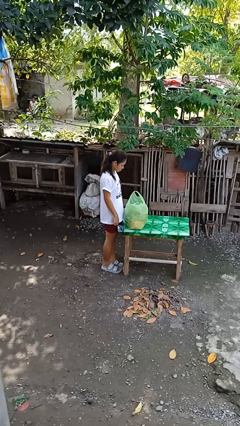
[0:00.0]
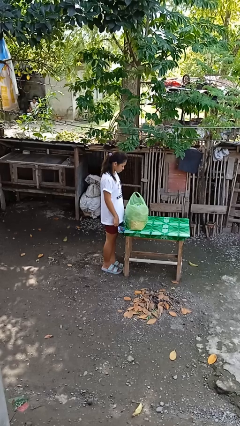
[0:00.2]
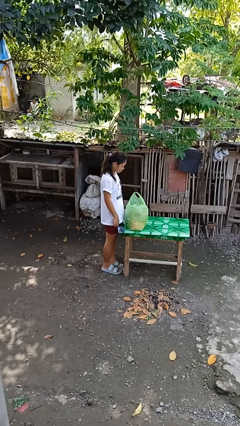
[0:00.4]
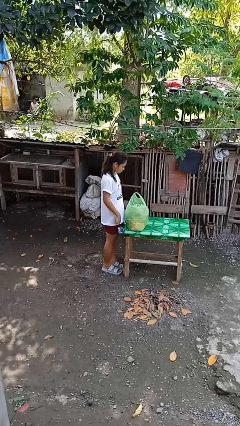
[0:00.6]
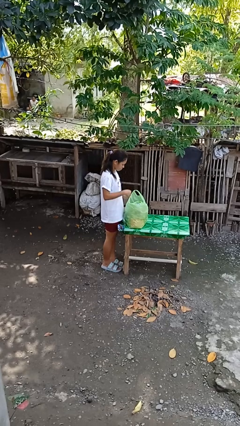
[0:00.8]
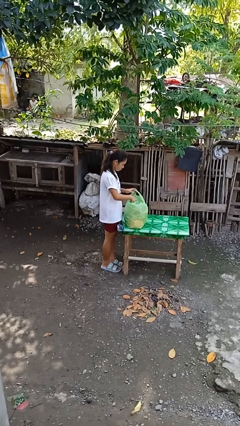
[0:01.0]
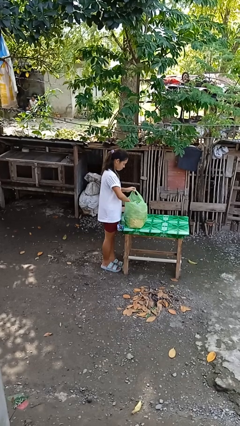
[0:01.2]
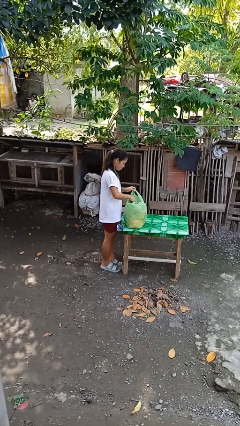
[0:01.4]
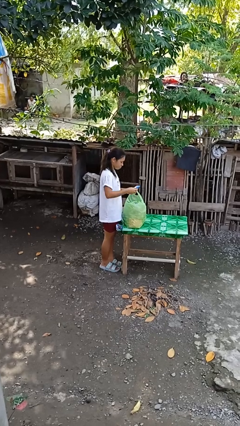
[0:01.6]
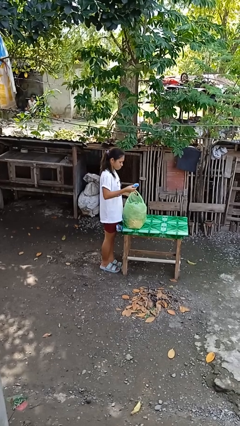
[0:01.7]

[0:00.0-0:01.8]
person hits person with pillow

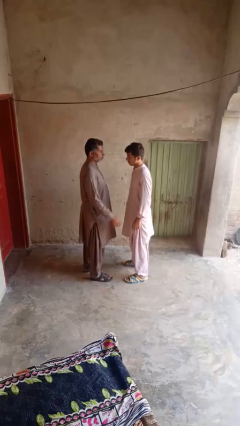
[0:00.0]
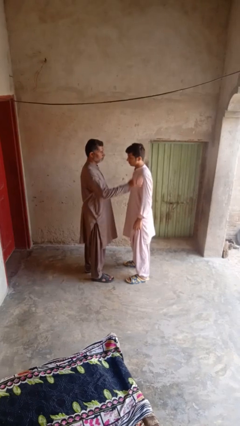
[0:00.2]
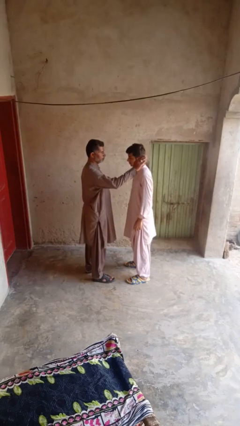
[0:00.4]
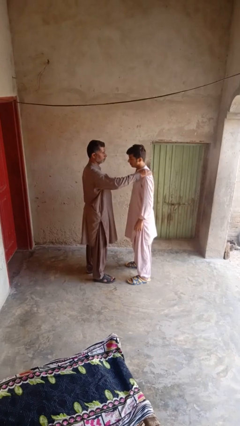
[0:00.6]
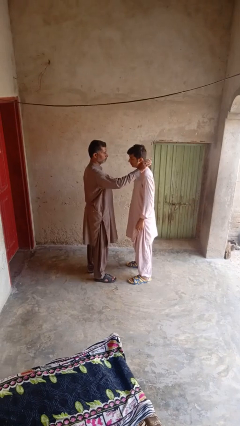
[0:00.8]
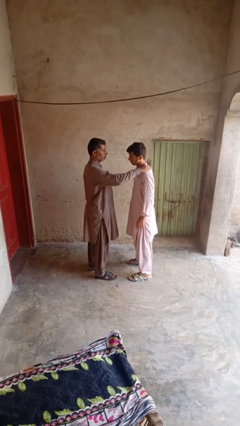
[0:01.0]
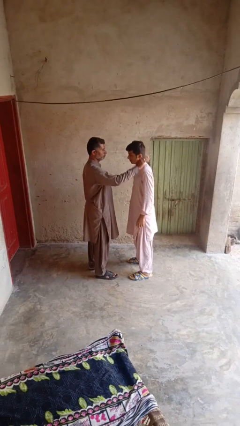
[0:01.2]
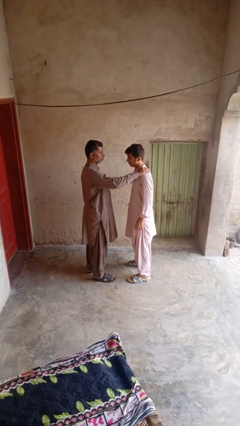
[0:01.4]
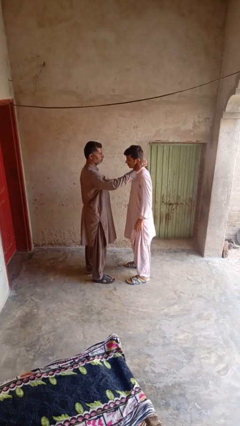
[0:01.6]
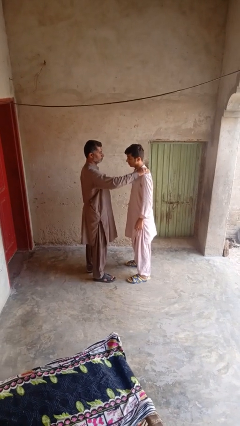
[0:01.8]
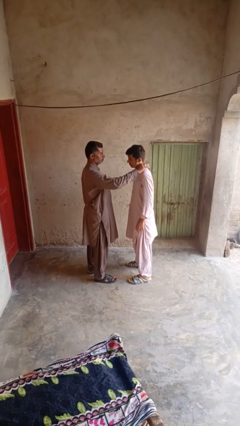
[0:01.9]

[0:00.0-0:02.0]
person pounds shoulders of person

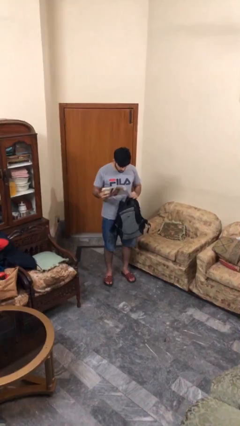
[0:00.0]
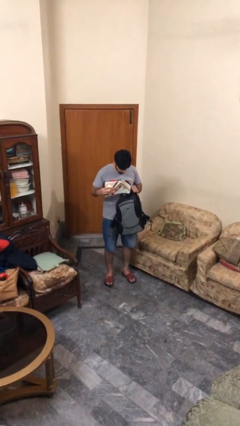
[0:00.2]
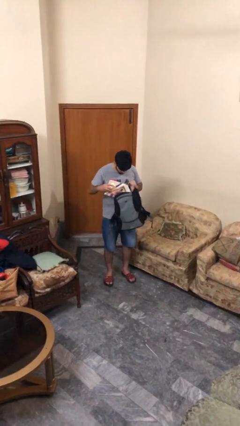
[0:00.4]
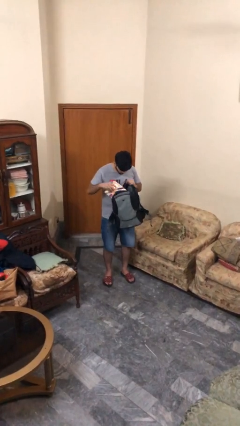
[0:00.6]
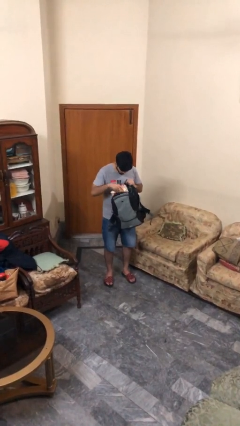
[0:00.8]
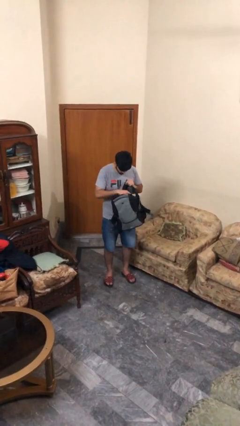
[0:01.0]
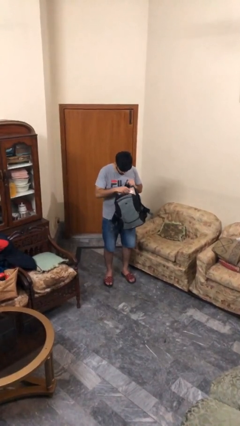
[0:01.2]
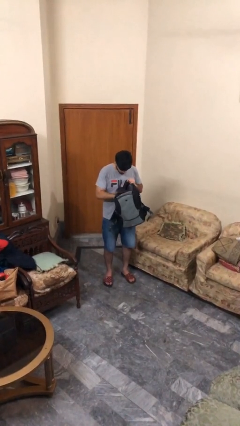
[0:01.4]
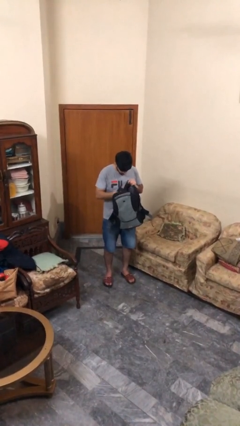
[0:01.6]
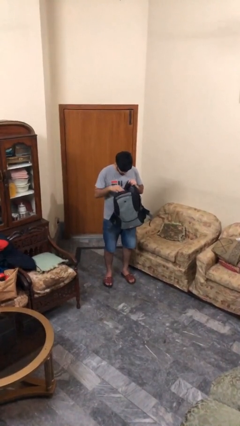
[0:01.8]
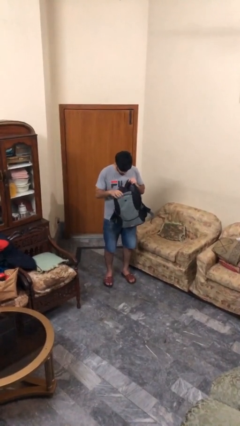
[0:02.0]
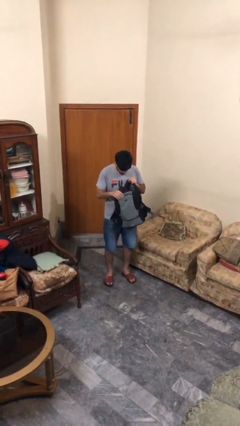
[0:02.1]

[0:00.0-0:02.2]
person puts object into backpack

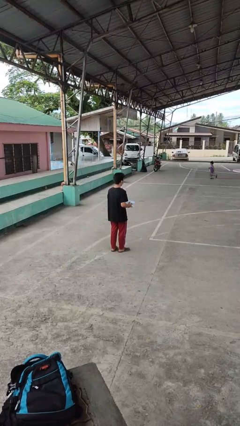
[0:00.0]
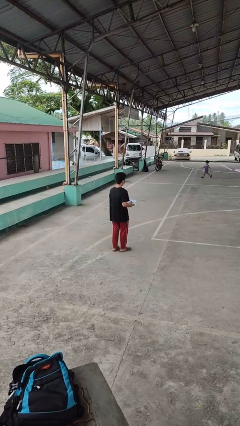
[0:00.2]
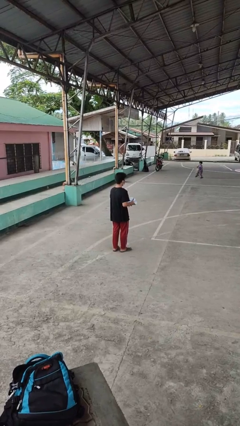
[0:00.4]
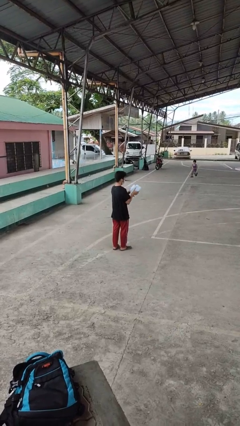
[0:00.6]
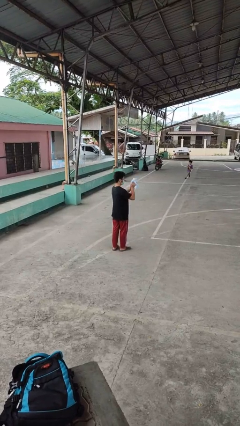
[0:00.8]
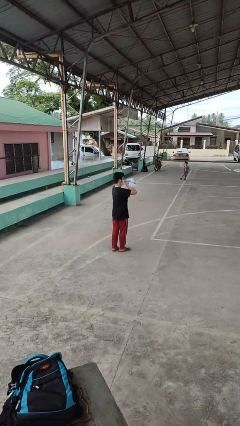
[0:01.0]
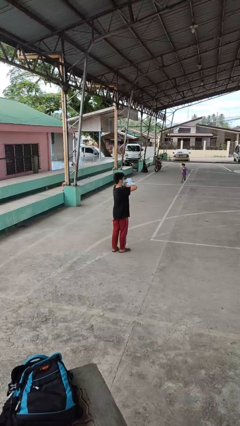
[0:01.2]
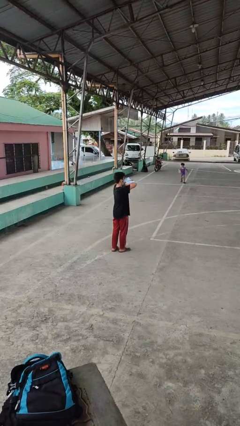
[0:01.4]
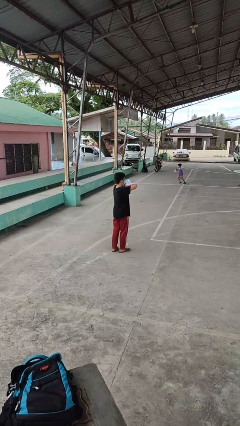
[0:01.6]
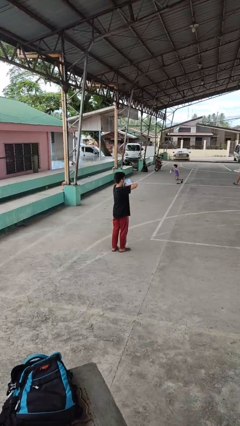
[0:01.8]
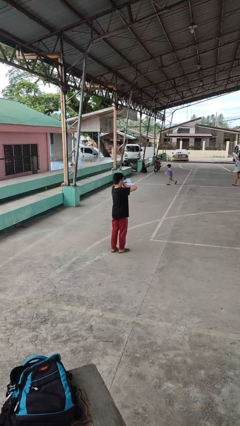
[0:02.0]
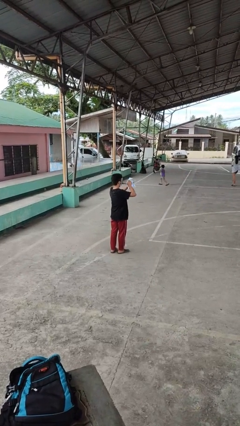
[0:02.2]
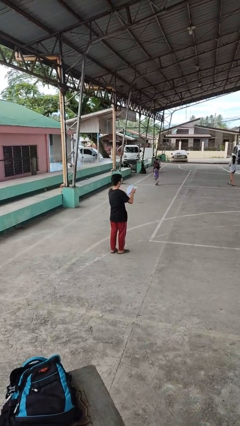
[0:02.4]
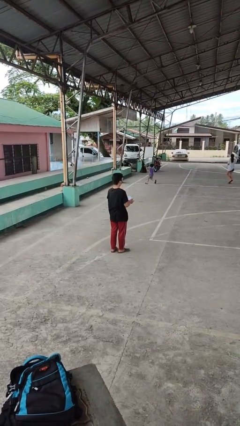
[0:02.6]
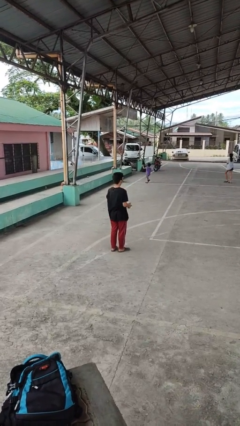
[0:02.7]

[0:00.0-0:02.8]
person squeezes object

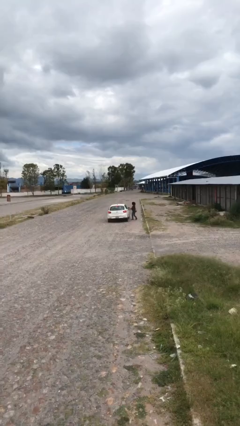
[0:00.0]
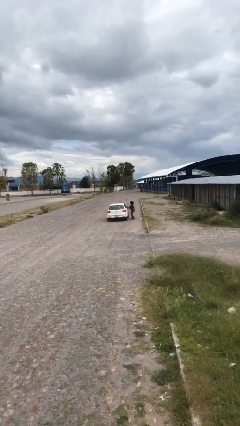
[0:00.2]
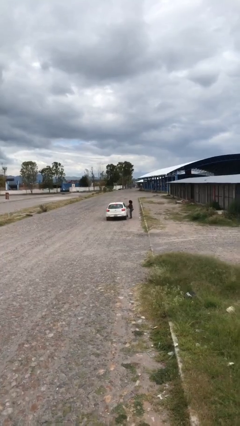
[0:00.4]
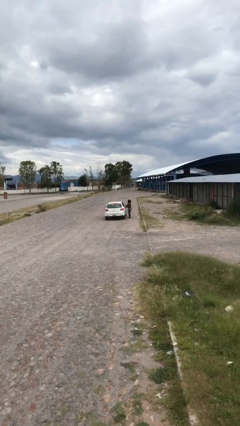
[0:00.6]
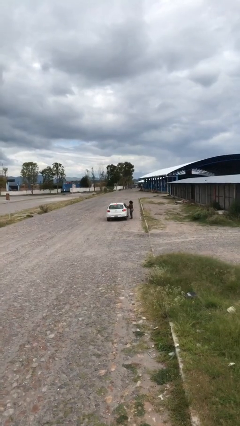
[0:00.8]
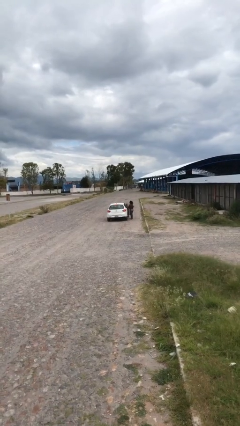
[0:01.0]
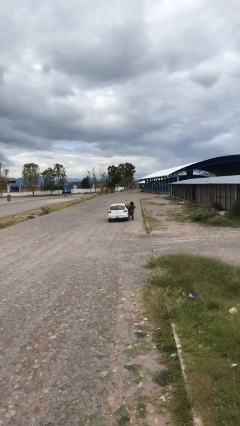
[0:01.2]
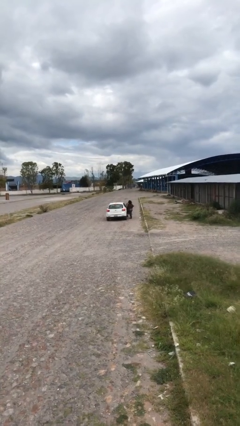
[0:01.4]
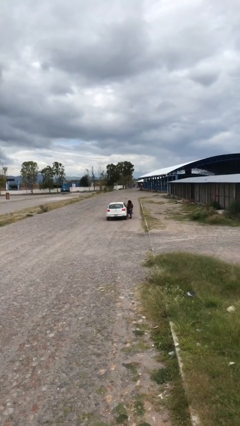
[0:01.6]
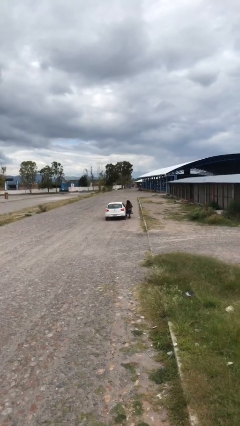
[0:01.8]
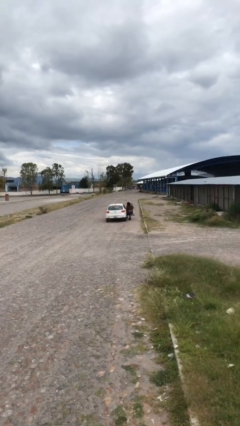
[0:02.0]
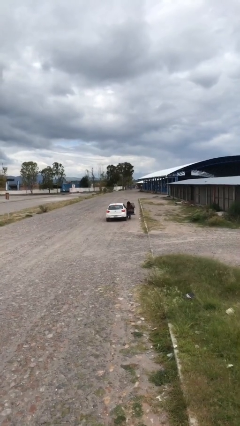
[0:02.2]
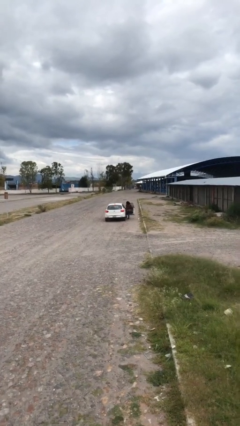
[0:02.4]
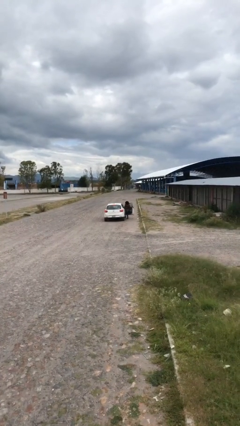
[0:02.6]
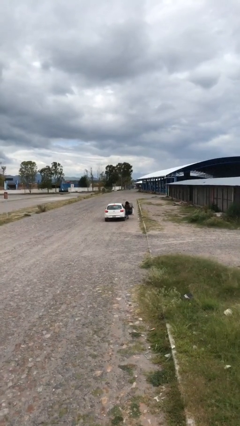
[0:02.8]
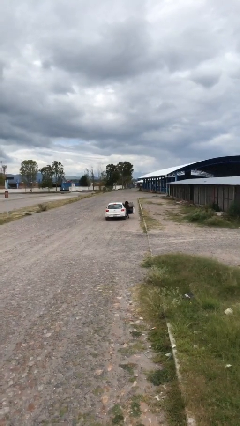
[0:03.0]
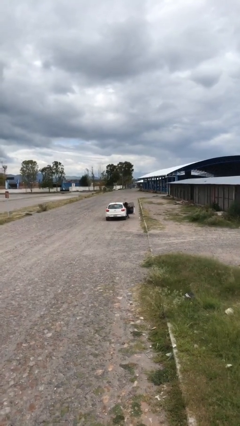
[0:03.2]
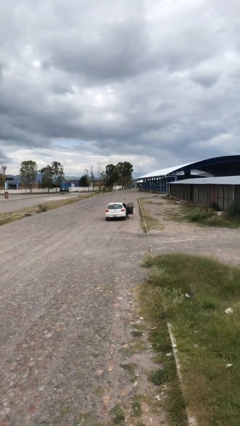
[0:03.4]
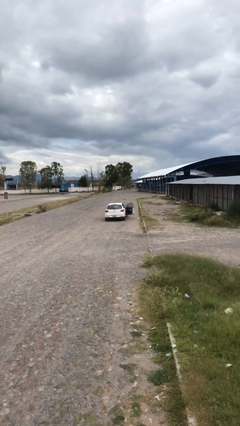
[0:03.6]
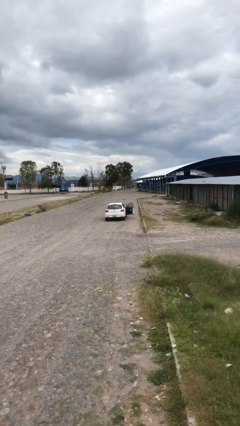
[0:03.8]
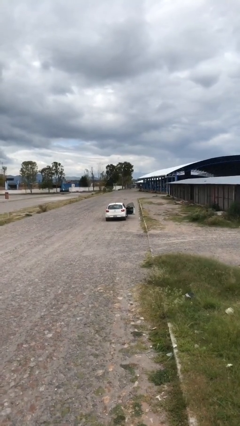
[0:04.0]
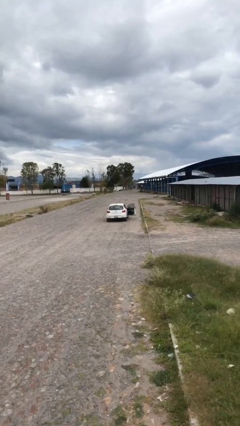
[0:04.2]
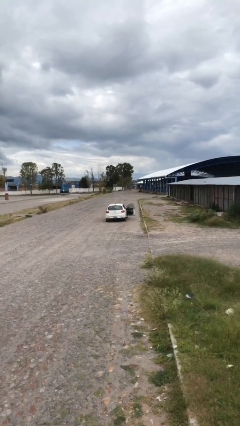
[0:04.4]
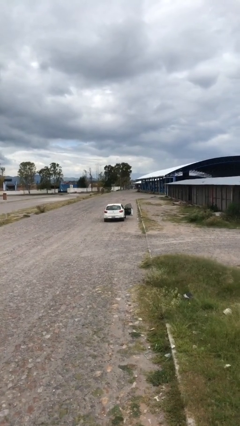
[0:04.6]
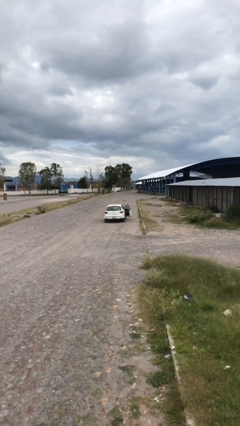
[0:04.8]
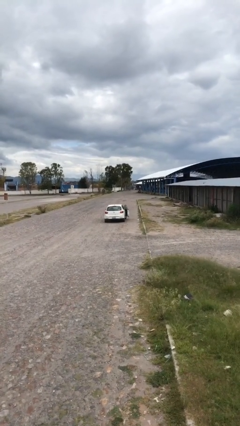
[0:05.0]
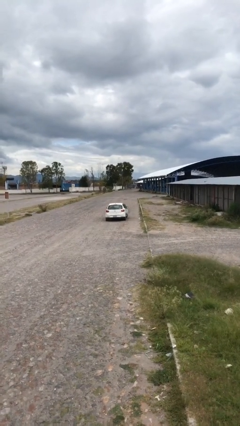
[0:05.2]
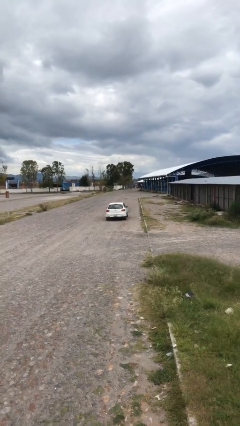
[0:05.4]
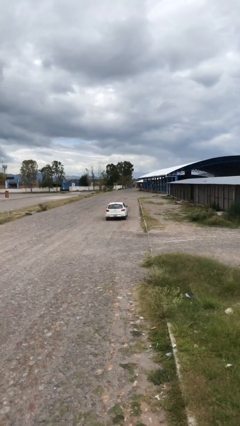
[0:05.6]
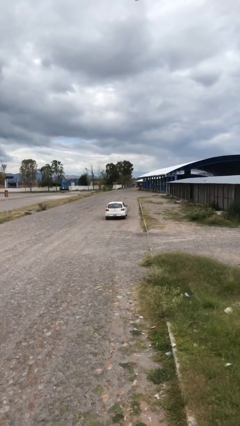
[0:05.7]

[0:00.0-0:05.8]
car picks up person

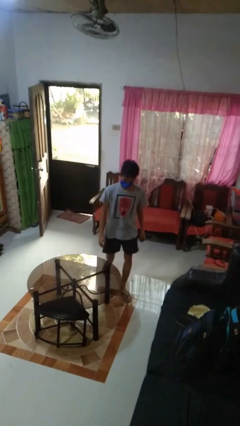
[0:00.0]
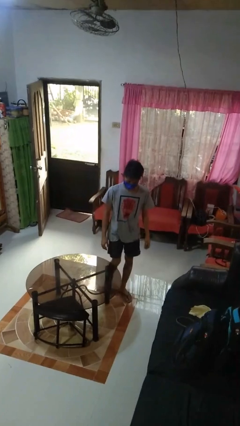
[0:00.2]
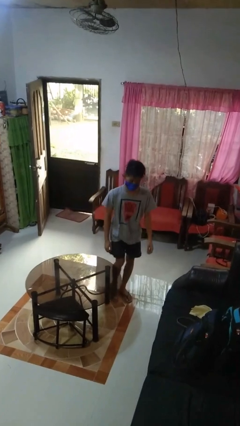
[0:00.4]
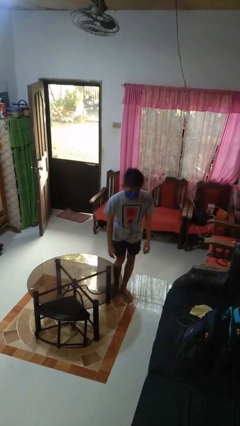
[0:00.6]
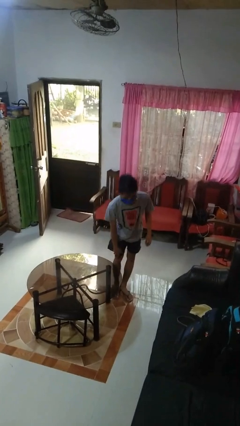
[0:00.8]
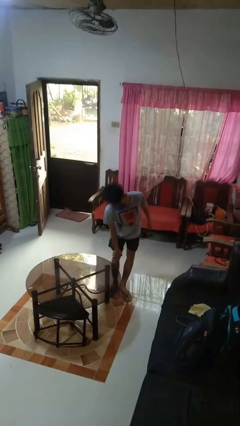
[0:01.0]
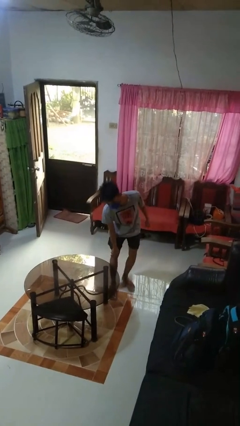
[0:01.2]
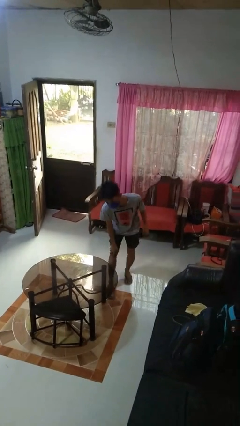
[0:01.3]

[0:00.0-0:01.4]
person bumps into table

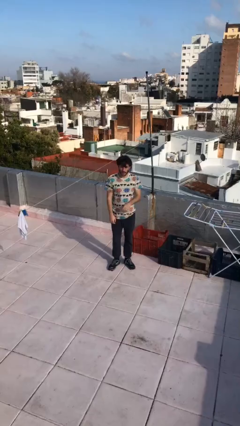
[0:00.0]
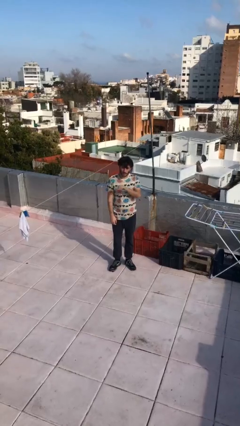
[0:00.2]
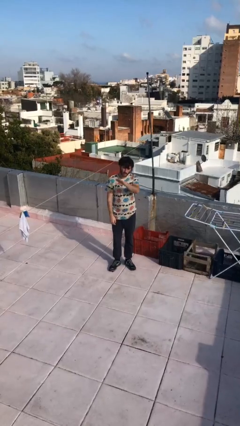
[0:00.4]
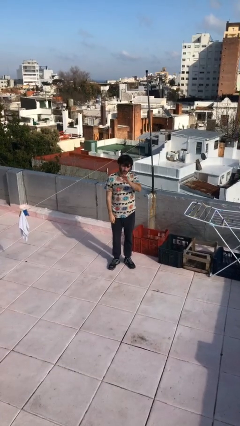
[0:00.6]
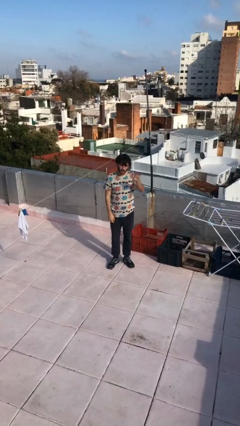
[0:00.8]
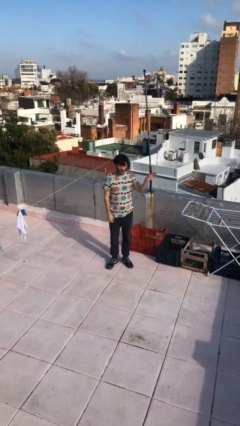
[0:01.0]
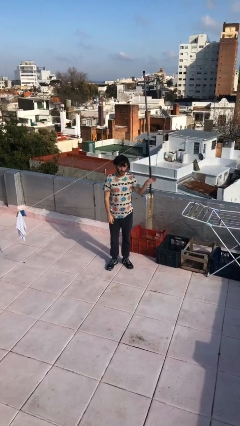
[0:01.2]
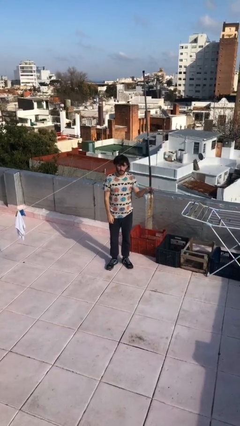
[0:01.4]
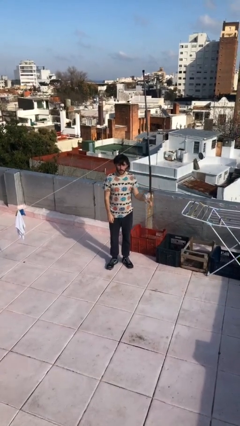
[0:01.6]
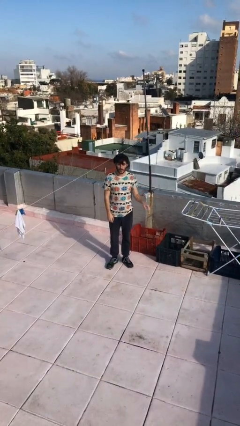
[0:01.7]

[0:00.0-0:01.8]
person gestures swipe left
